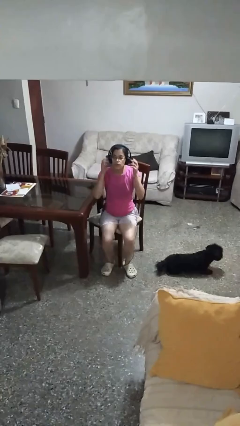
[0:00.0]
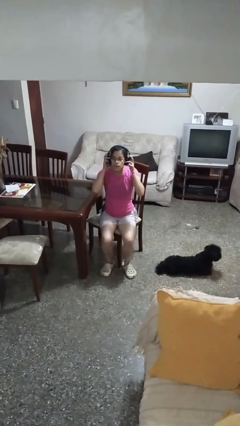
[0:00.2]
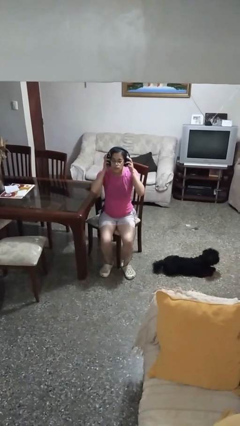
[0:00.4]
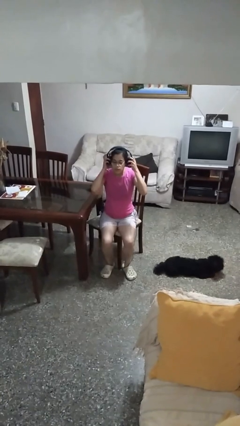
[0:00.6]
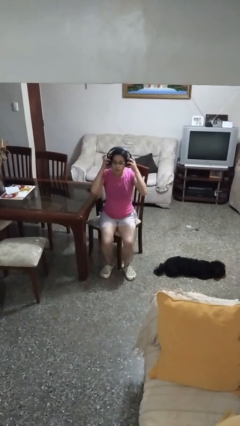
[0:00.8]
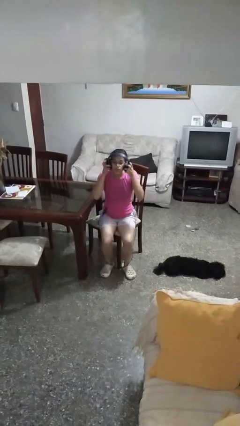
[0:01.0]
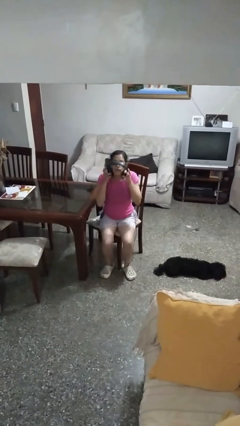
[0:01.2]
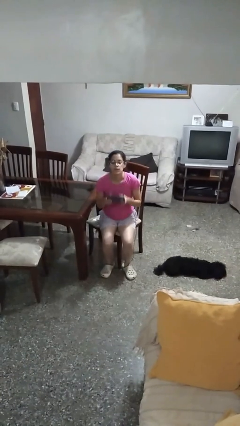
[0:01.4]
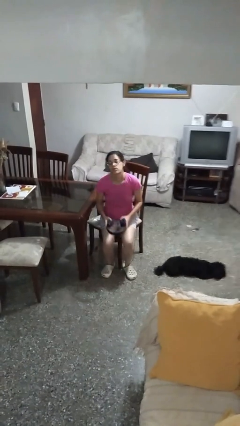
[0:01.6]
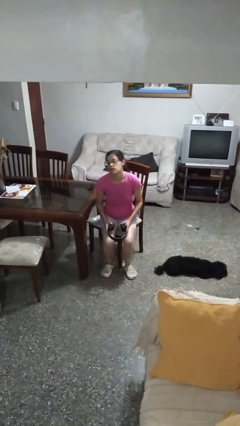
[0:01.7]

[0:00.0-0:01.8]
person takes off headphones

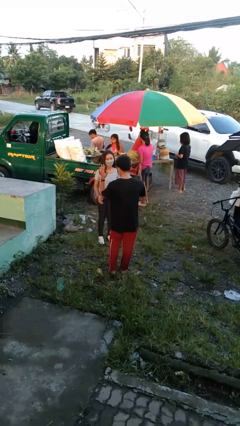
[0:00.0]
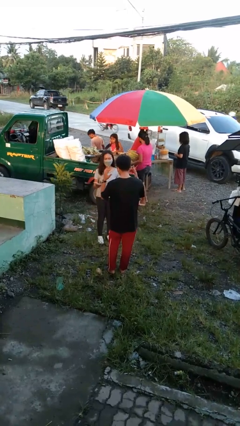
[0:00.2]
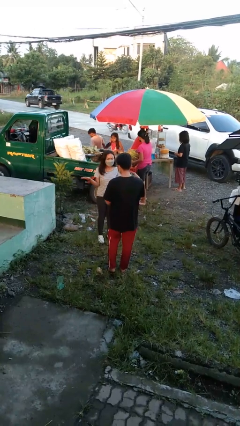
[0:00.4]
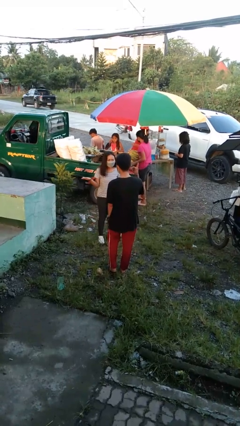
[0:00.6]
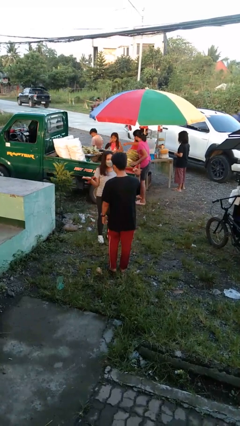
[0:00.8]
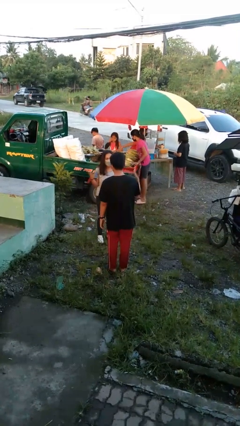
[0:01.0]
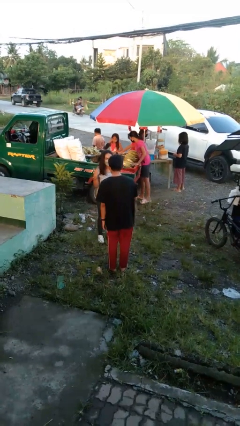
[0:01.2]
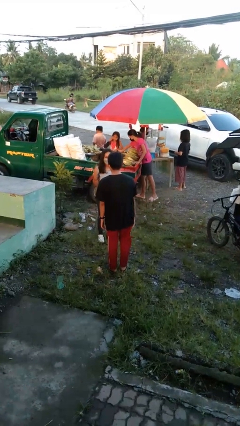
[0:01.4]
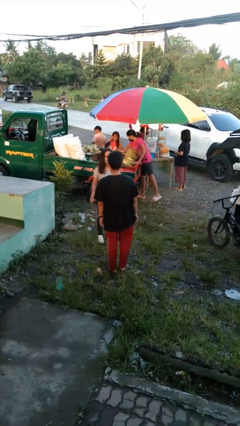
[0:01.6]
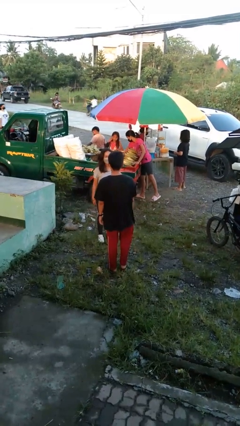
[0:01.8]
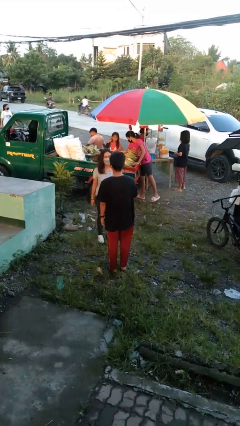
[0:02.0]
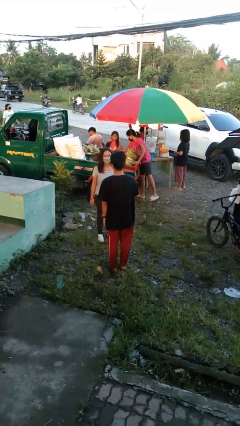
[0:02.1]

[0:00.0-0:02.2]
person talks to person

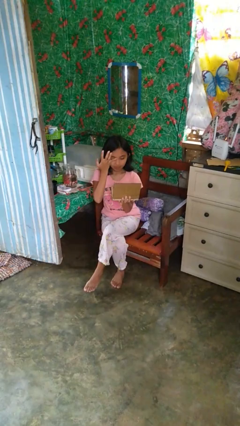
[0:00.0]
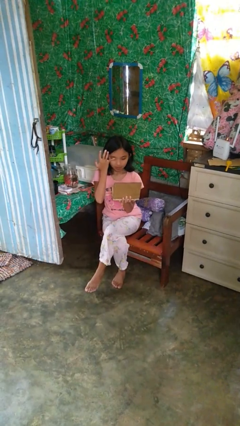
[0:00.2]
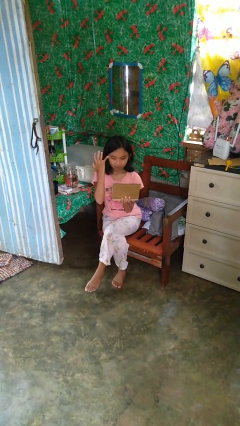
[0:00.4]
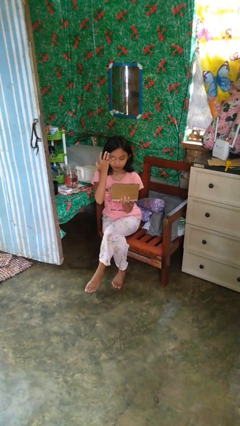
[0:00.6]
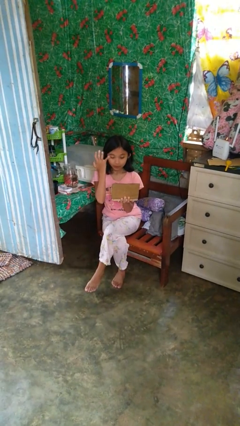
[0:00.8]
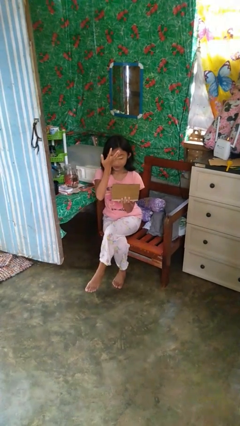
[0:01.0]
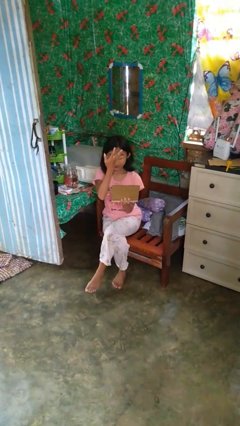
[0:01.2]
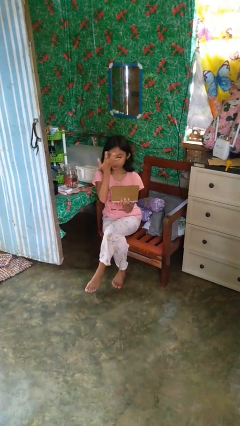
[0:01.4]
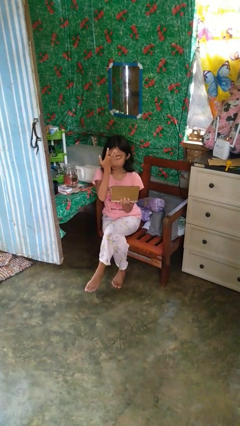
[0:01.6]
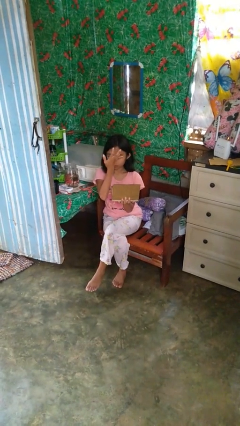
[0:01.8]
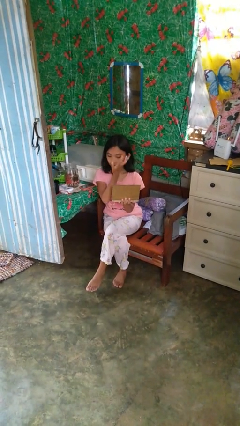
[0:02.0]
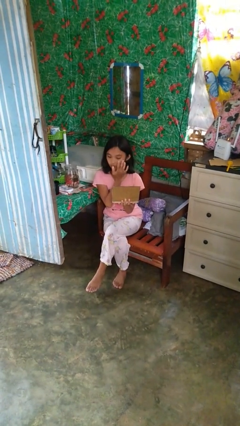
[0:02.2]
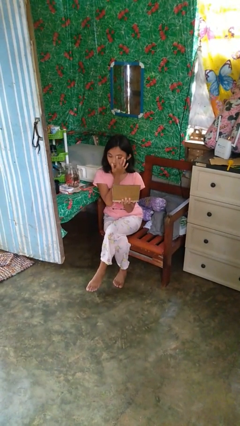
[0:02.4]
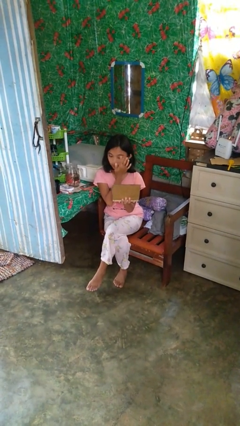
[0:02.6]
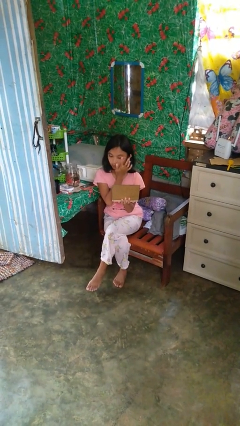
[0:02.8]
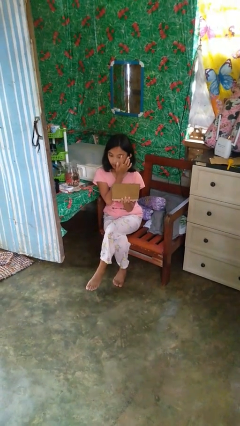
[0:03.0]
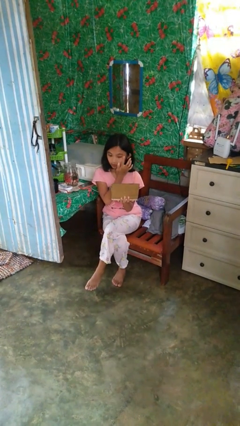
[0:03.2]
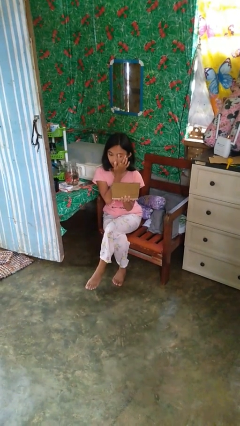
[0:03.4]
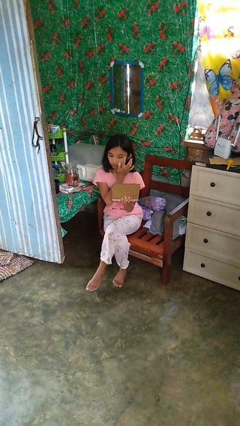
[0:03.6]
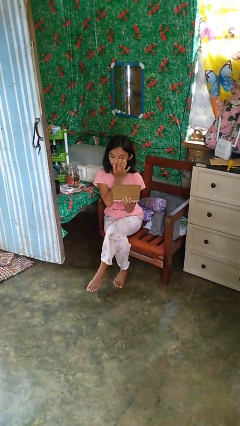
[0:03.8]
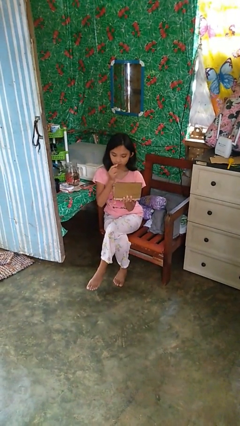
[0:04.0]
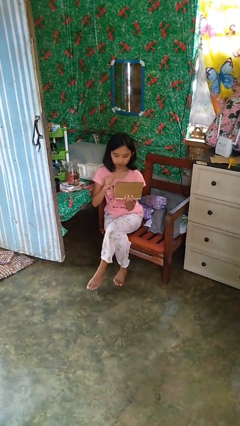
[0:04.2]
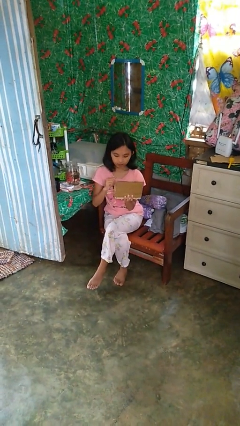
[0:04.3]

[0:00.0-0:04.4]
person applies eye makeup

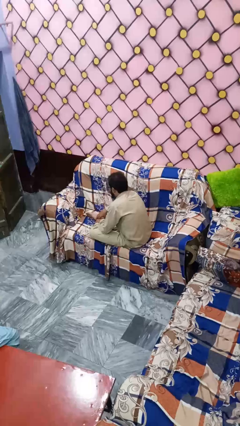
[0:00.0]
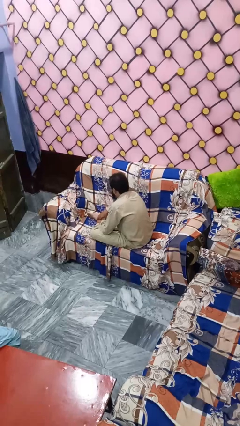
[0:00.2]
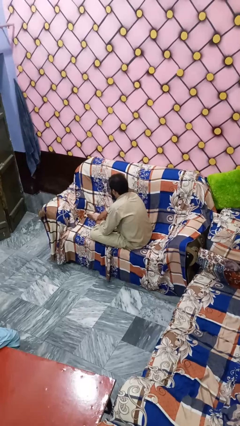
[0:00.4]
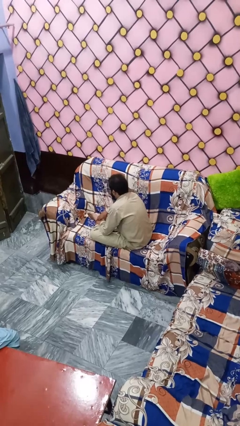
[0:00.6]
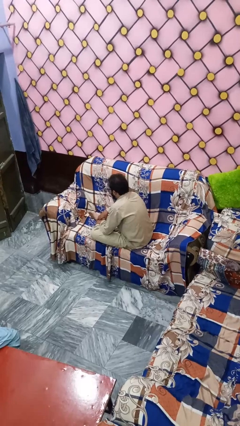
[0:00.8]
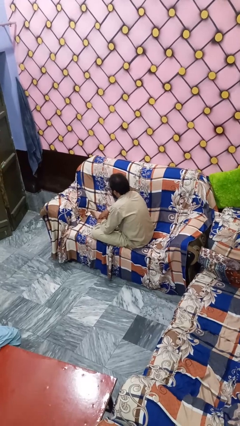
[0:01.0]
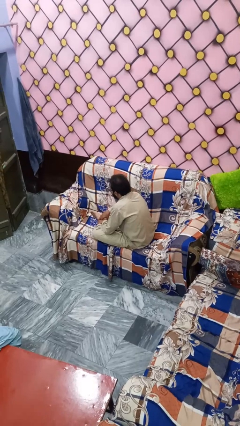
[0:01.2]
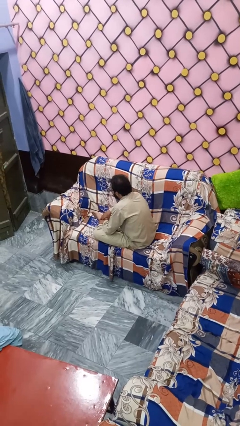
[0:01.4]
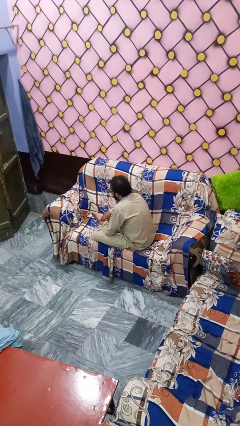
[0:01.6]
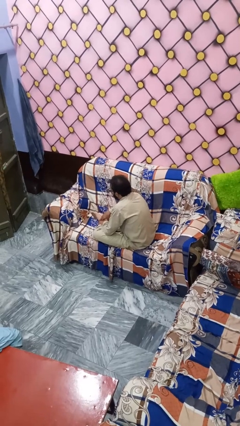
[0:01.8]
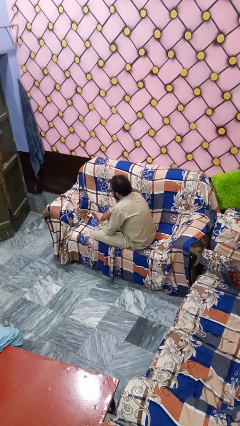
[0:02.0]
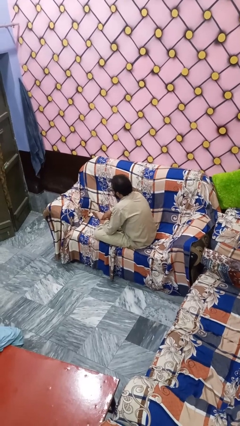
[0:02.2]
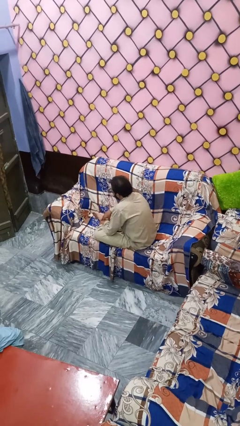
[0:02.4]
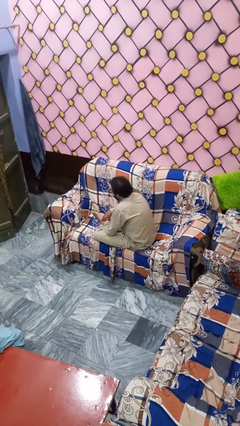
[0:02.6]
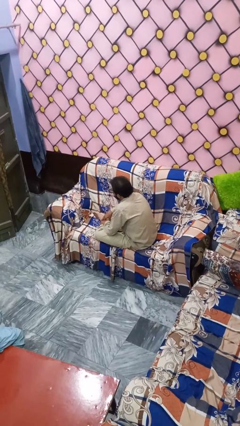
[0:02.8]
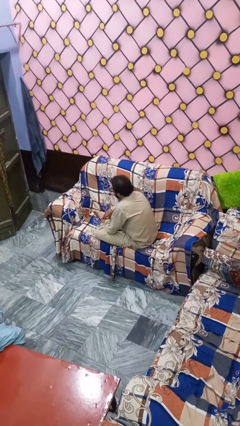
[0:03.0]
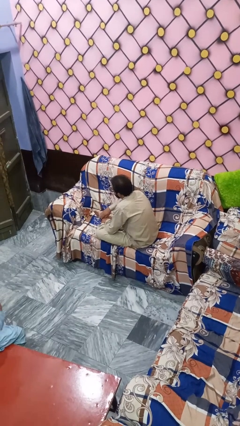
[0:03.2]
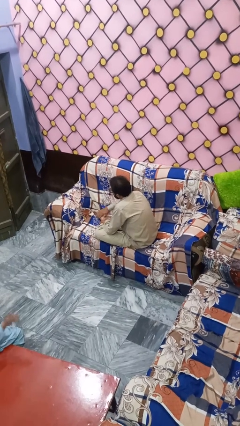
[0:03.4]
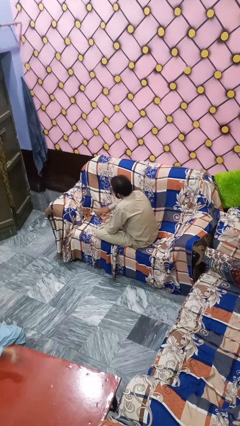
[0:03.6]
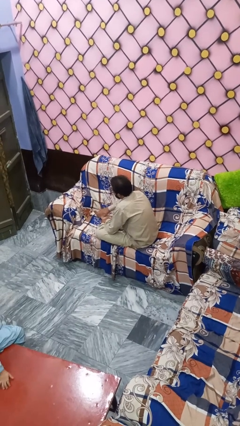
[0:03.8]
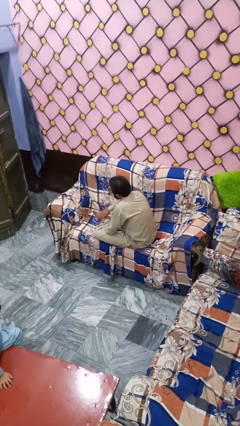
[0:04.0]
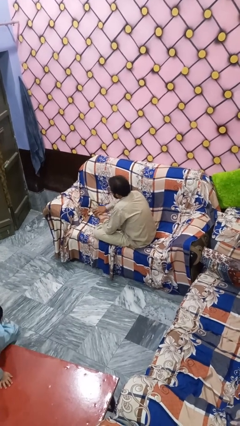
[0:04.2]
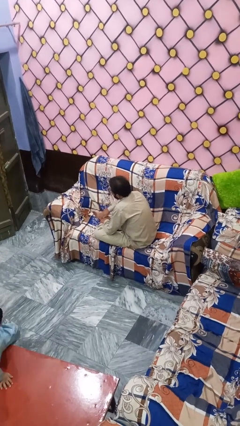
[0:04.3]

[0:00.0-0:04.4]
person rubs foot

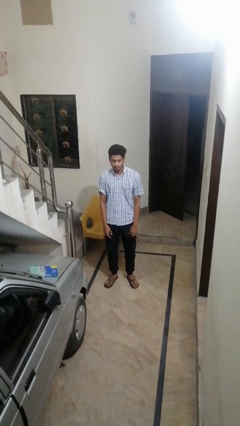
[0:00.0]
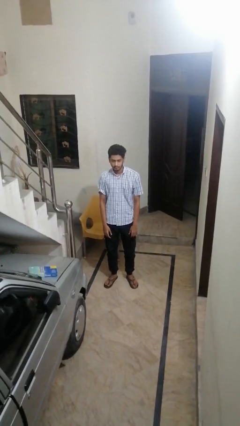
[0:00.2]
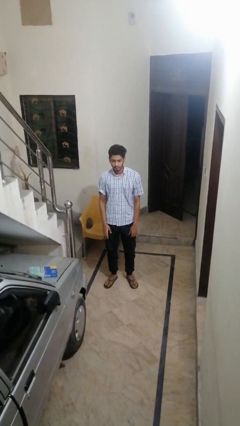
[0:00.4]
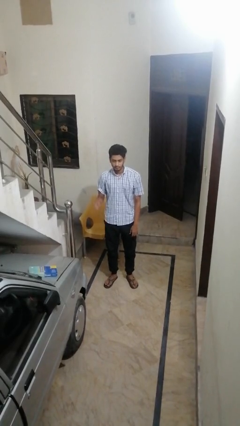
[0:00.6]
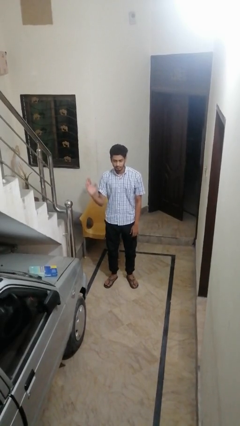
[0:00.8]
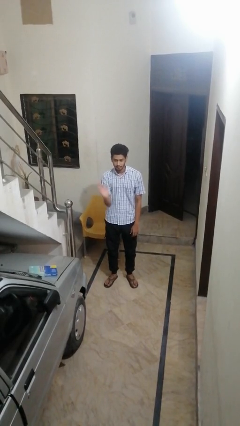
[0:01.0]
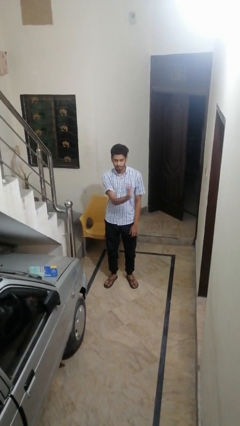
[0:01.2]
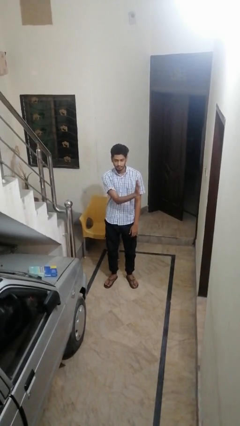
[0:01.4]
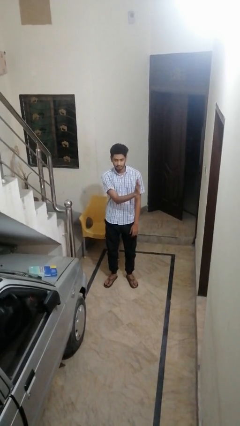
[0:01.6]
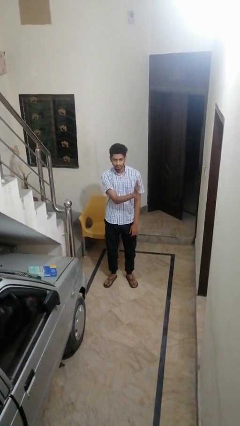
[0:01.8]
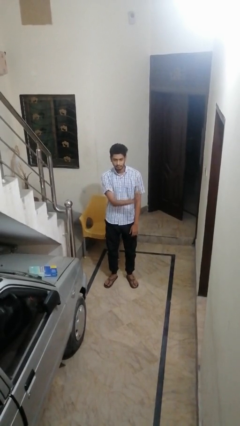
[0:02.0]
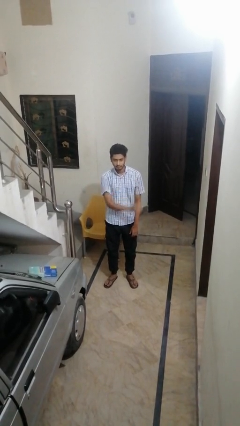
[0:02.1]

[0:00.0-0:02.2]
person gestures swipe left

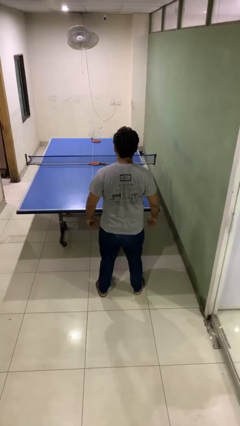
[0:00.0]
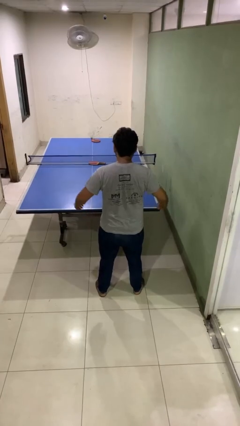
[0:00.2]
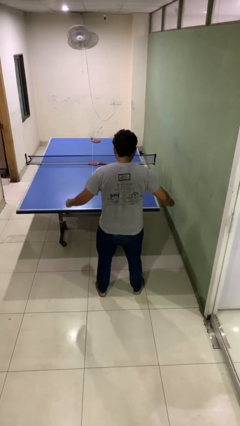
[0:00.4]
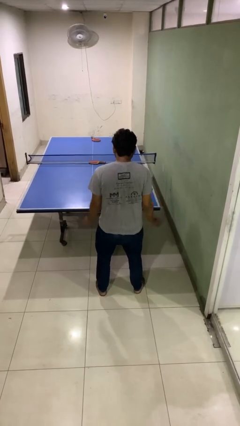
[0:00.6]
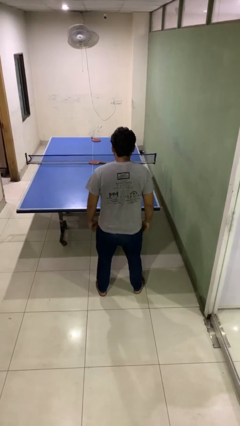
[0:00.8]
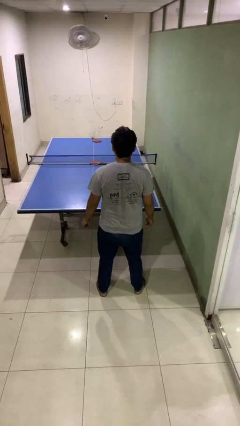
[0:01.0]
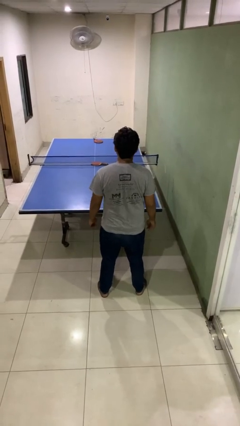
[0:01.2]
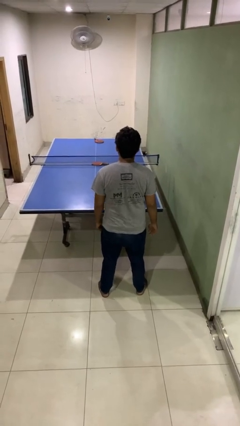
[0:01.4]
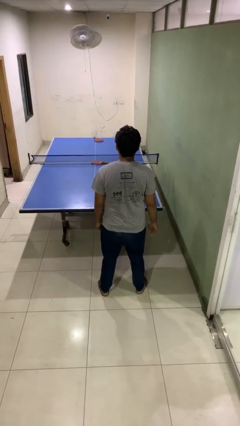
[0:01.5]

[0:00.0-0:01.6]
person slaps hands on thighs

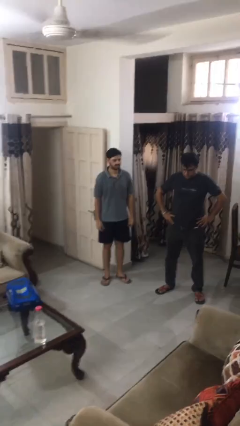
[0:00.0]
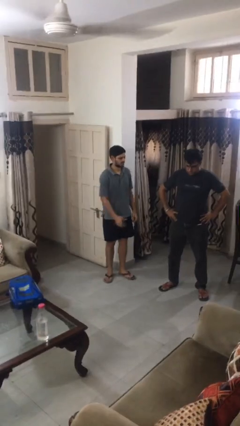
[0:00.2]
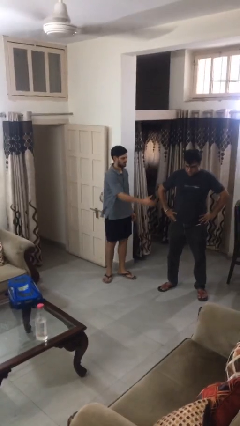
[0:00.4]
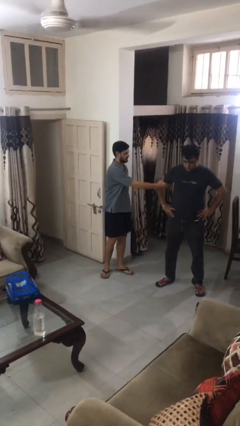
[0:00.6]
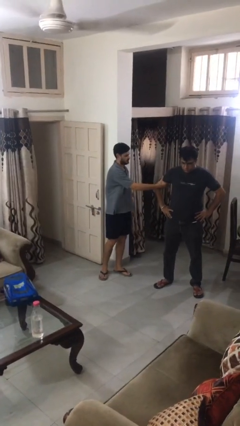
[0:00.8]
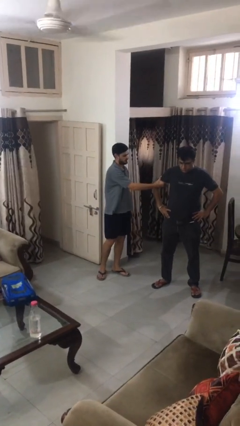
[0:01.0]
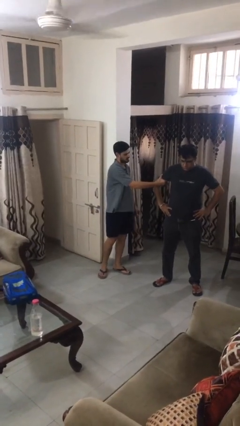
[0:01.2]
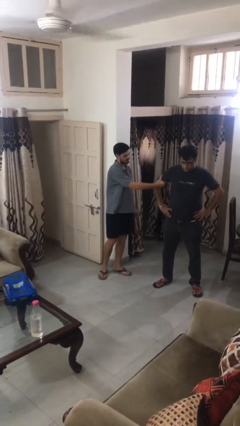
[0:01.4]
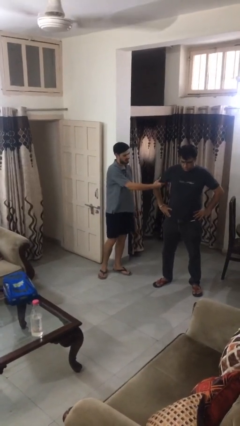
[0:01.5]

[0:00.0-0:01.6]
person grabs person by bicep
